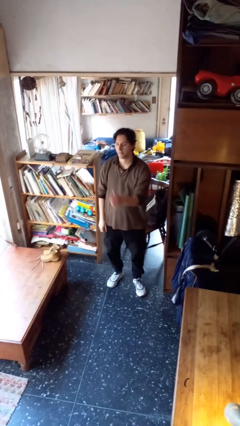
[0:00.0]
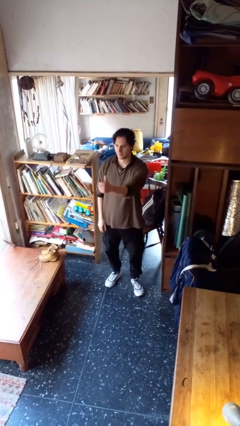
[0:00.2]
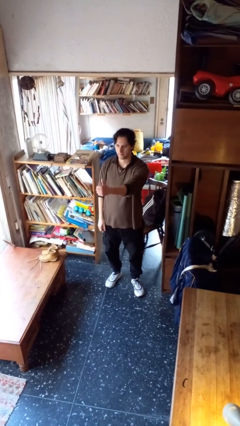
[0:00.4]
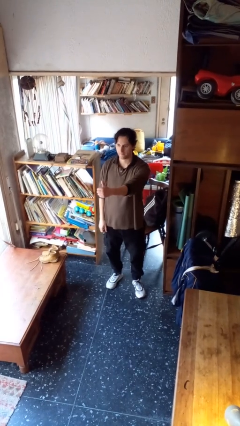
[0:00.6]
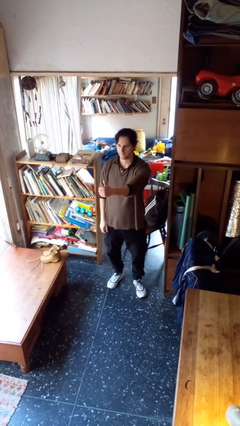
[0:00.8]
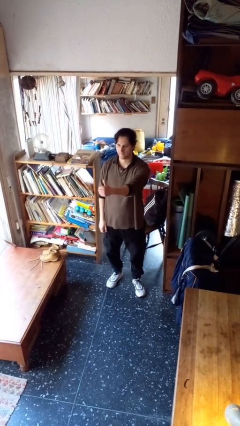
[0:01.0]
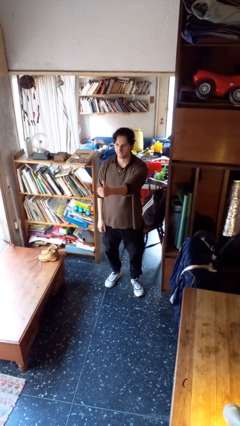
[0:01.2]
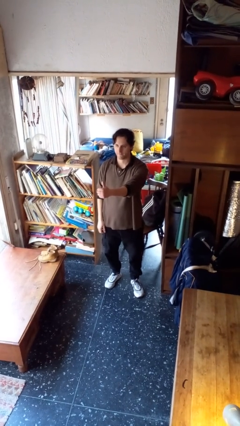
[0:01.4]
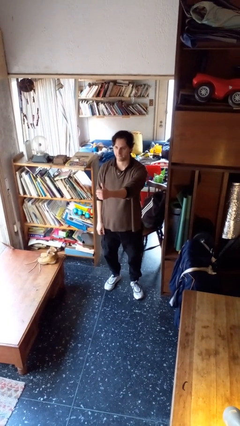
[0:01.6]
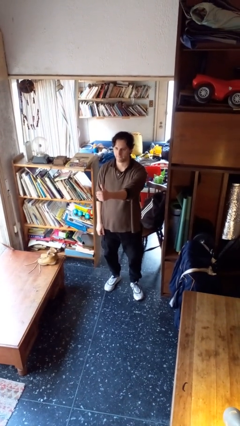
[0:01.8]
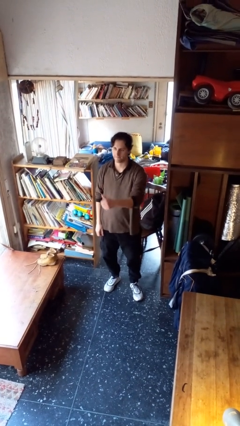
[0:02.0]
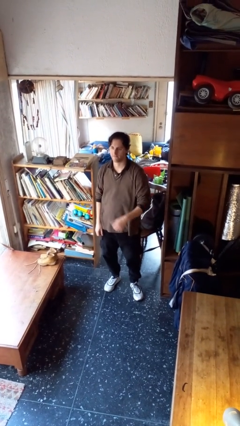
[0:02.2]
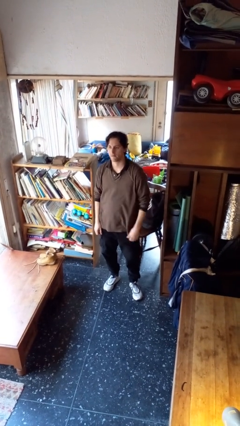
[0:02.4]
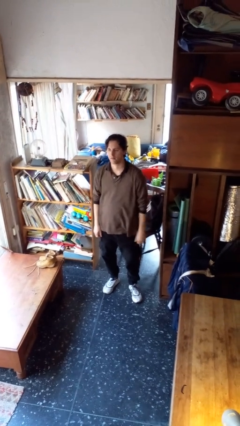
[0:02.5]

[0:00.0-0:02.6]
person gestures thumbs up

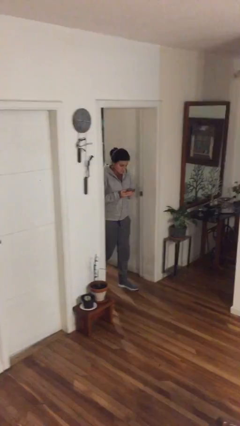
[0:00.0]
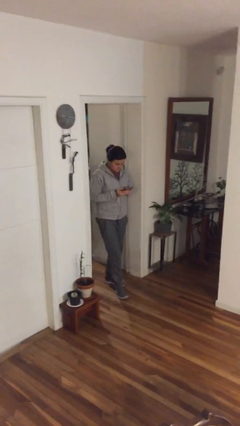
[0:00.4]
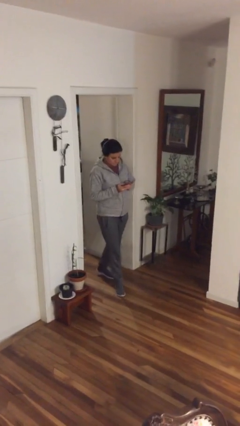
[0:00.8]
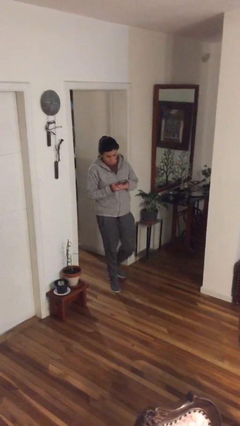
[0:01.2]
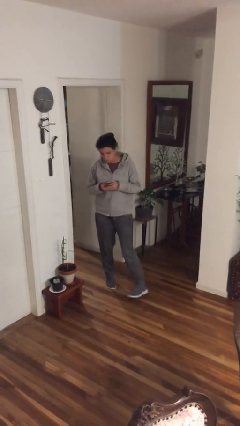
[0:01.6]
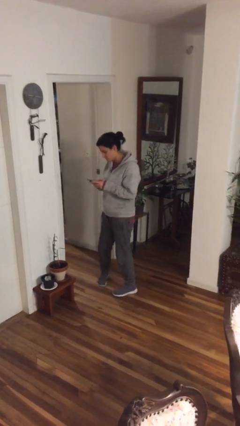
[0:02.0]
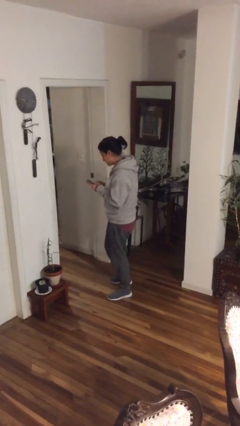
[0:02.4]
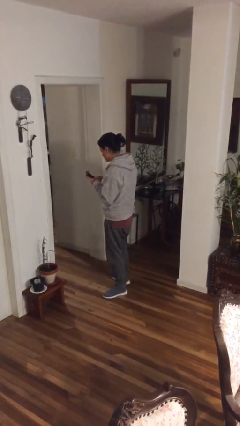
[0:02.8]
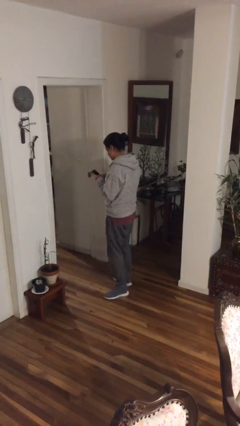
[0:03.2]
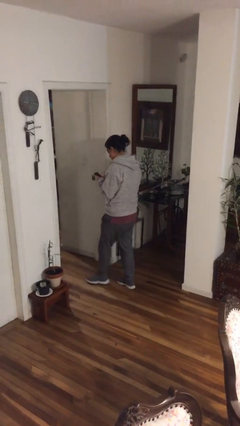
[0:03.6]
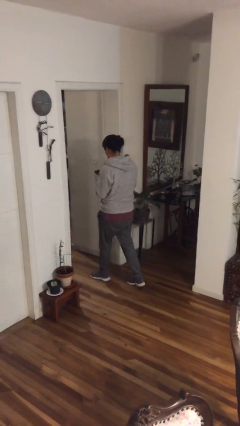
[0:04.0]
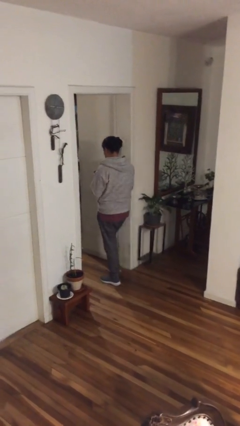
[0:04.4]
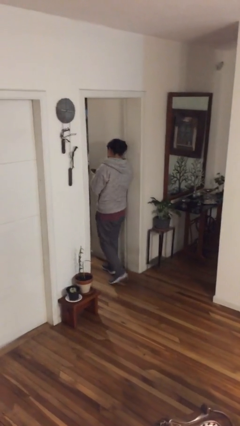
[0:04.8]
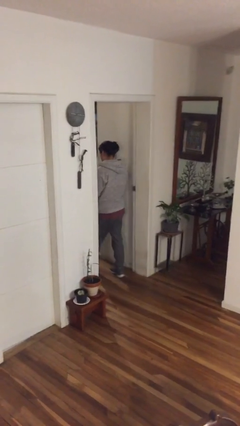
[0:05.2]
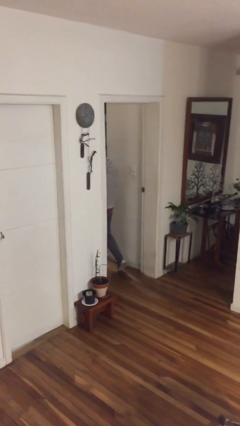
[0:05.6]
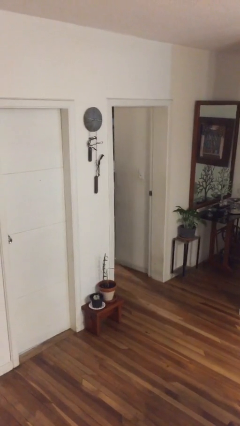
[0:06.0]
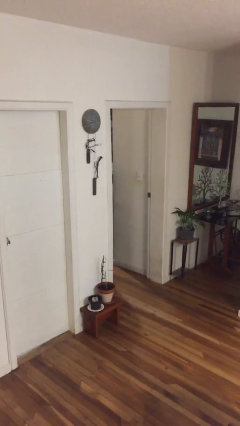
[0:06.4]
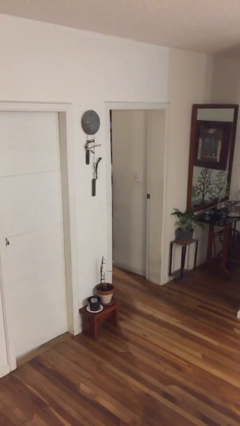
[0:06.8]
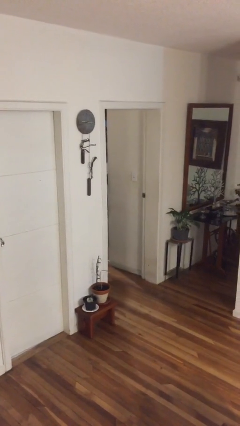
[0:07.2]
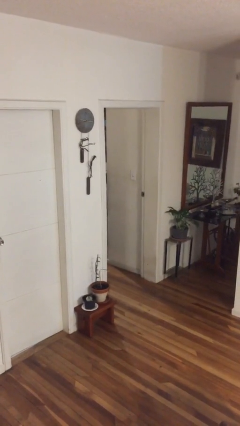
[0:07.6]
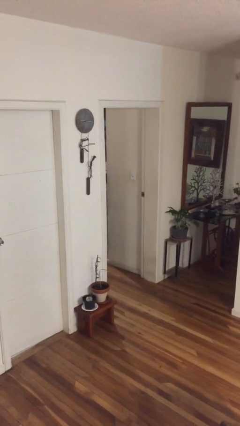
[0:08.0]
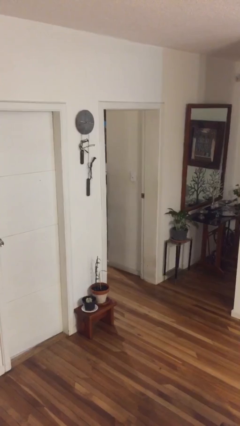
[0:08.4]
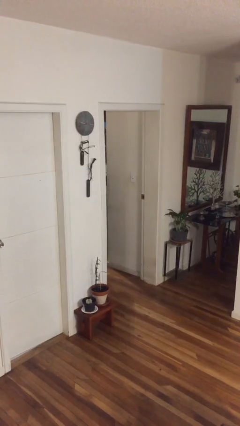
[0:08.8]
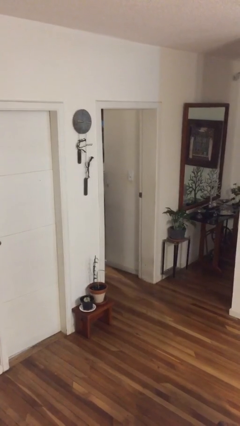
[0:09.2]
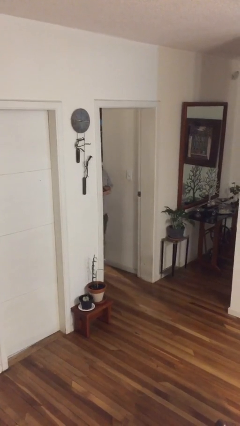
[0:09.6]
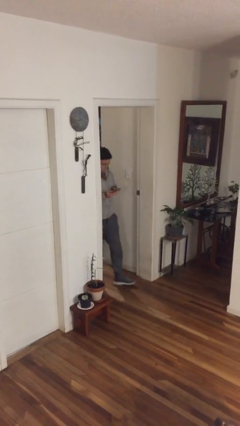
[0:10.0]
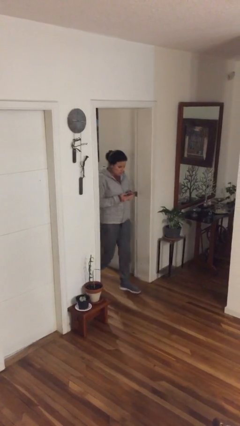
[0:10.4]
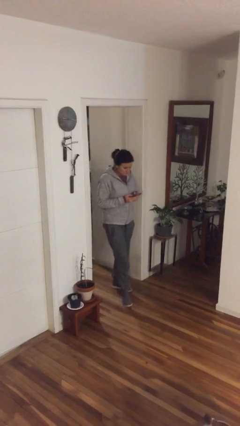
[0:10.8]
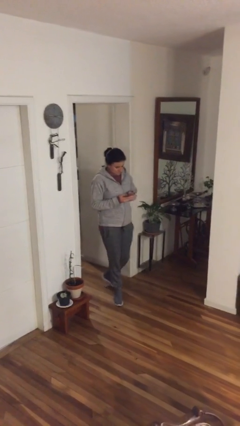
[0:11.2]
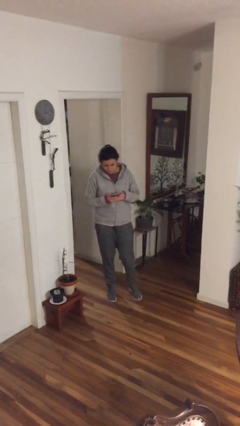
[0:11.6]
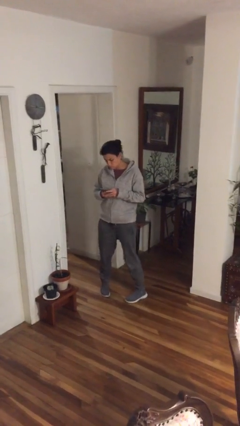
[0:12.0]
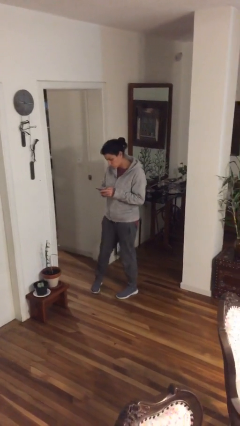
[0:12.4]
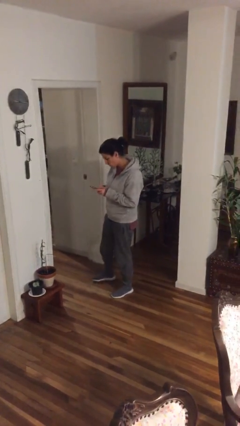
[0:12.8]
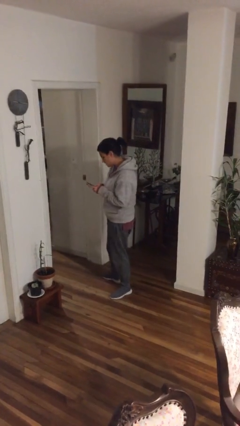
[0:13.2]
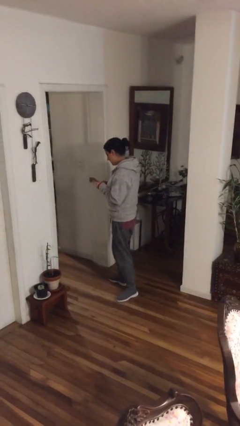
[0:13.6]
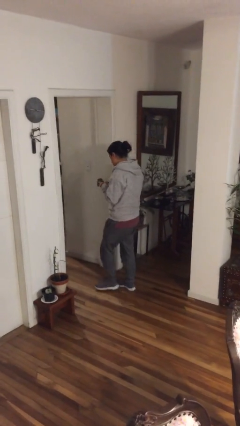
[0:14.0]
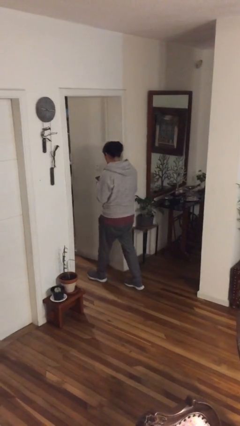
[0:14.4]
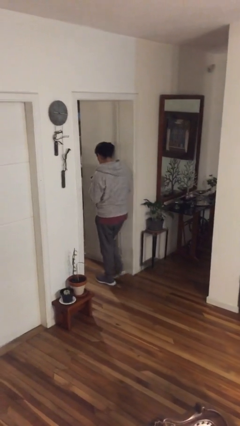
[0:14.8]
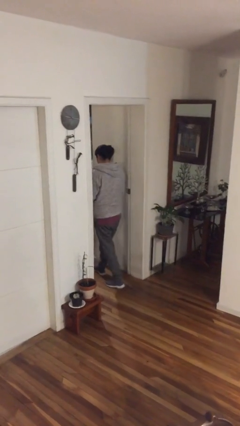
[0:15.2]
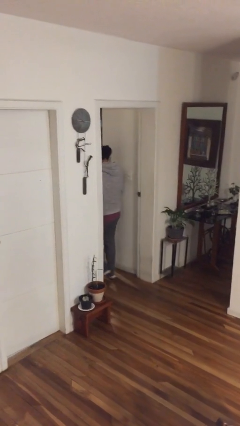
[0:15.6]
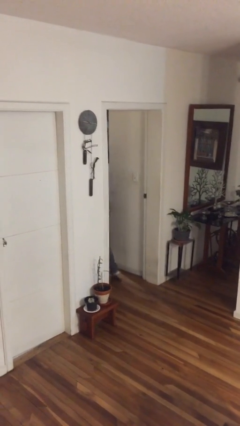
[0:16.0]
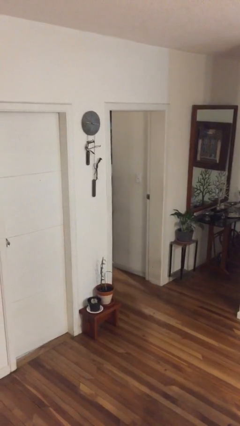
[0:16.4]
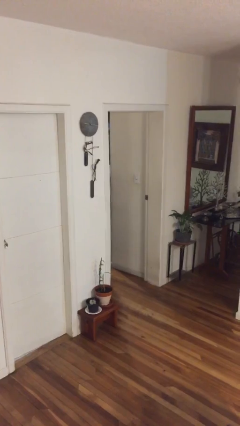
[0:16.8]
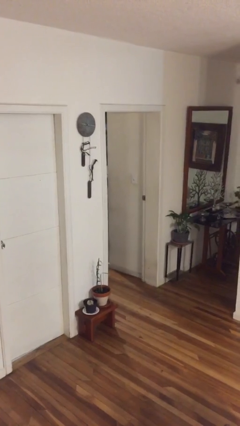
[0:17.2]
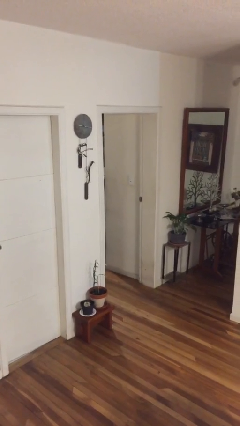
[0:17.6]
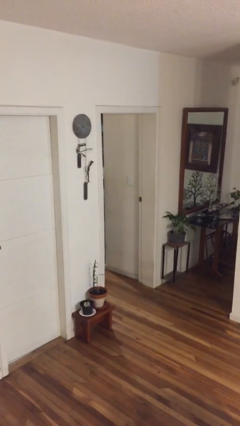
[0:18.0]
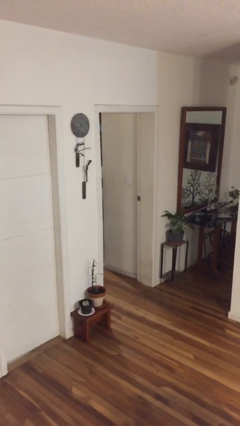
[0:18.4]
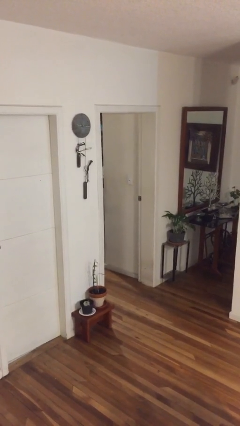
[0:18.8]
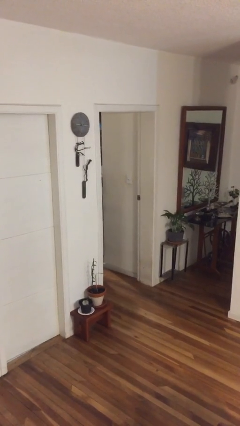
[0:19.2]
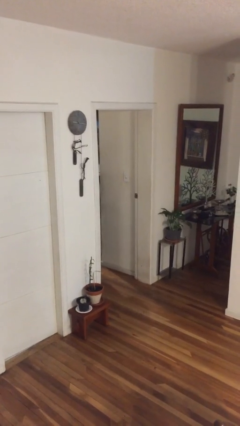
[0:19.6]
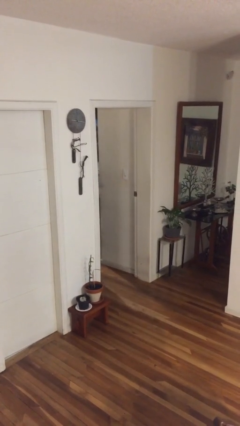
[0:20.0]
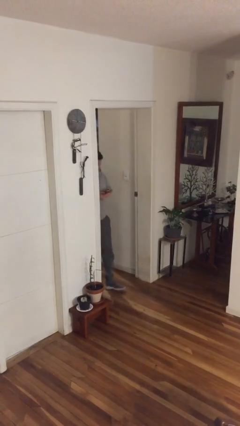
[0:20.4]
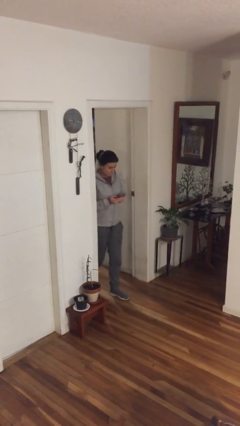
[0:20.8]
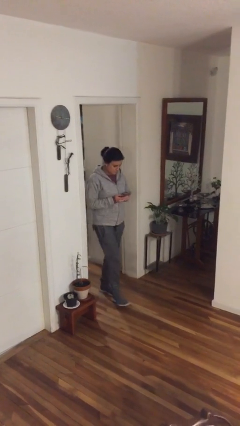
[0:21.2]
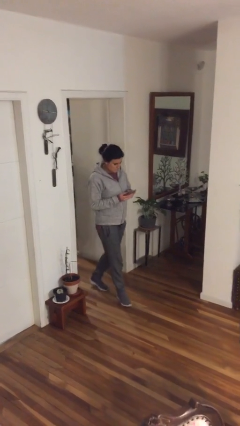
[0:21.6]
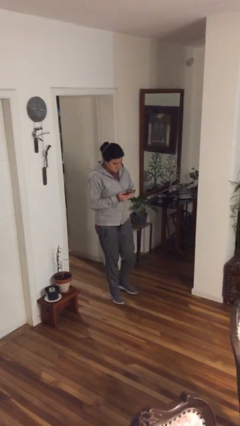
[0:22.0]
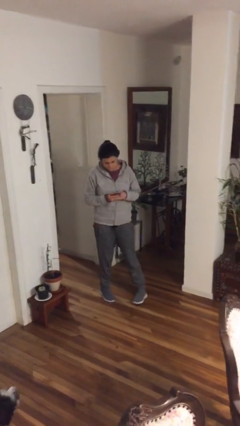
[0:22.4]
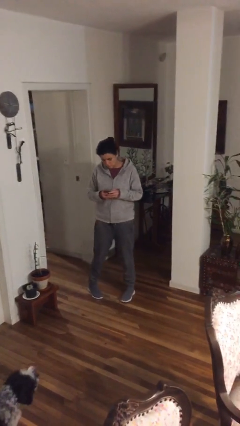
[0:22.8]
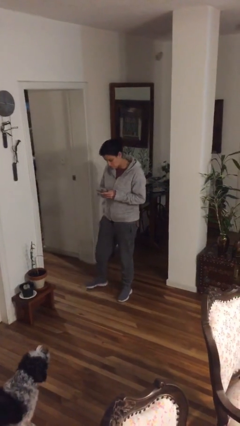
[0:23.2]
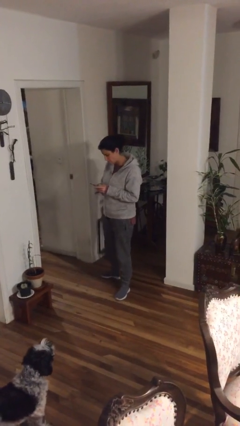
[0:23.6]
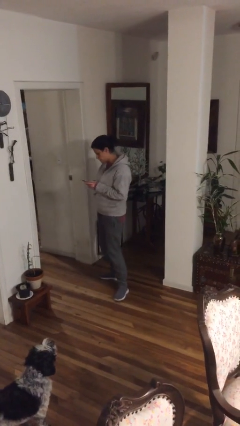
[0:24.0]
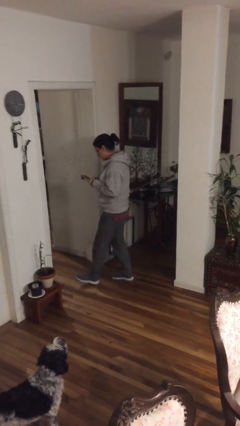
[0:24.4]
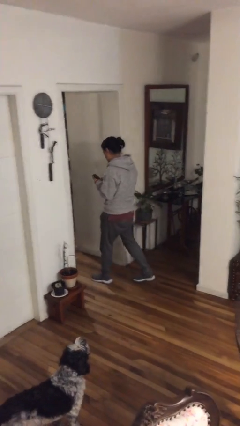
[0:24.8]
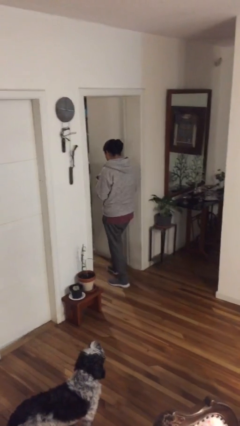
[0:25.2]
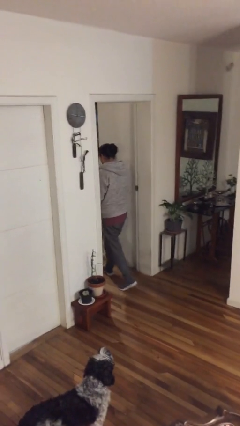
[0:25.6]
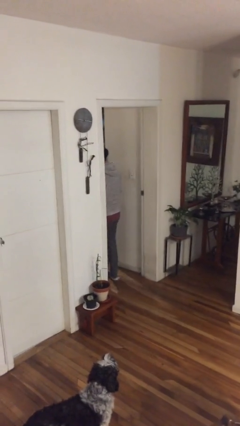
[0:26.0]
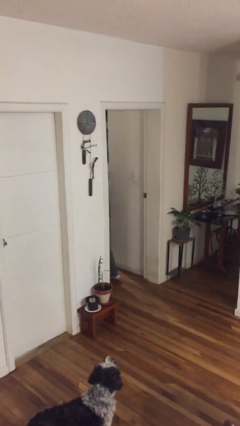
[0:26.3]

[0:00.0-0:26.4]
person texts on phone

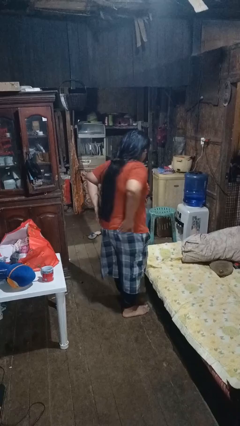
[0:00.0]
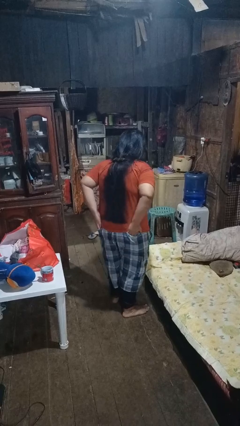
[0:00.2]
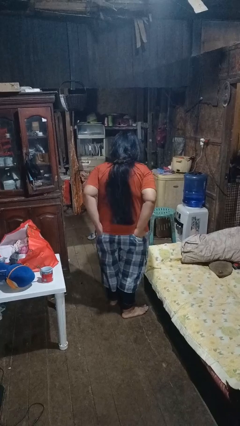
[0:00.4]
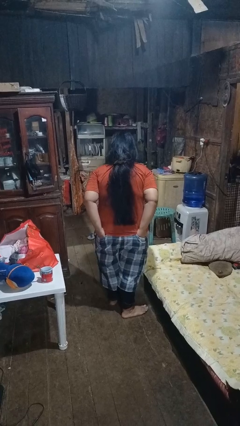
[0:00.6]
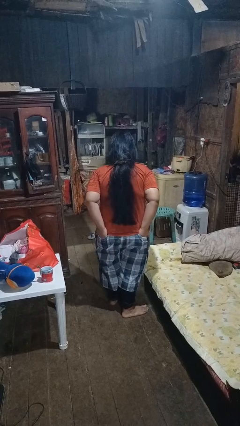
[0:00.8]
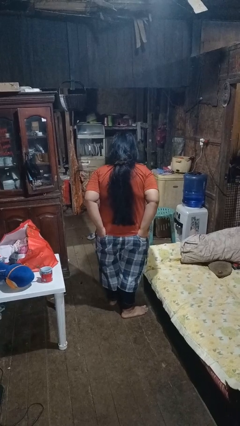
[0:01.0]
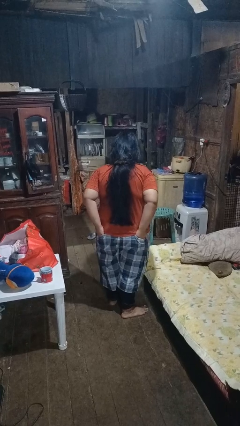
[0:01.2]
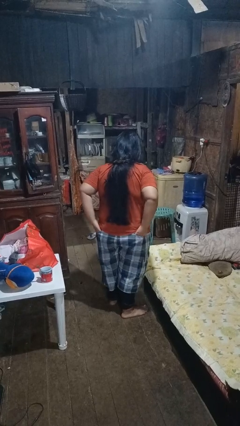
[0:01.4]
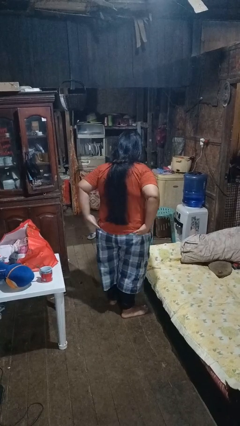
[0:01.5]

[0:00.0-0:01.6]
person puts hands in back pockets

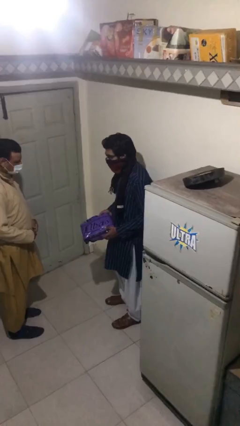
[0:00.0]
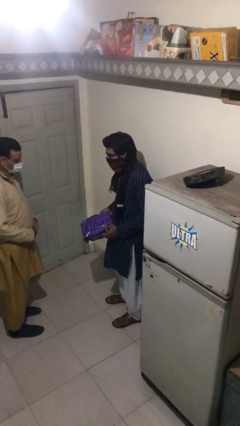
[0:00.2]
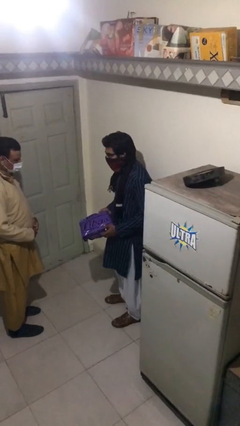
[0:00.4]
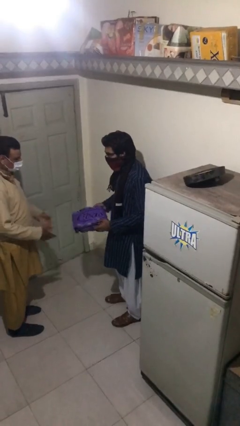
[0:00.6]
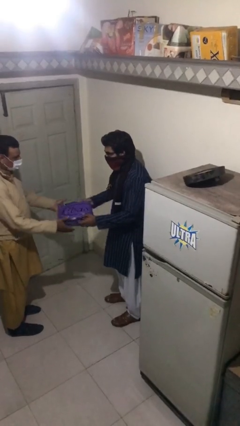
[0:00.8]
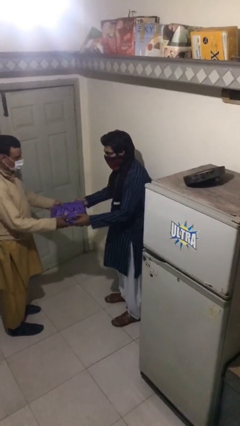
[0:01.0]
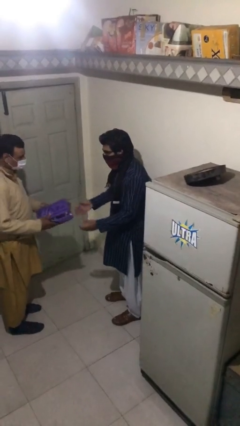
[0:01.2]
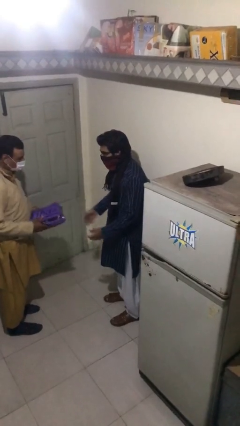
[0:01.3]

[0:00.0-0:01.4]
person transfers object to person
